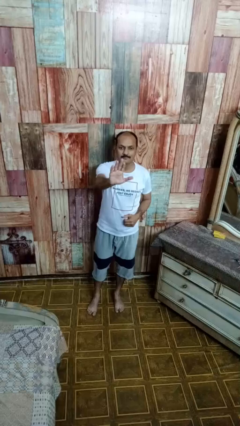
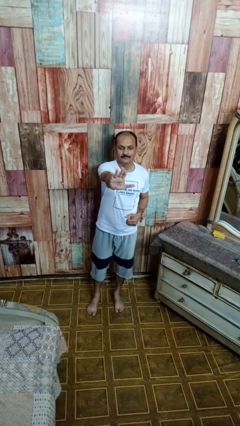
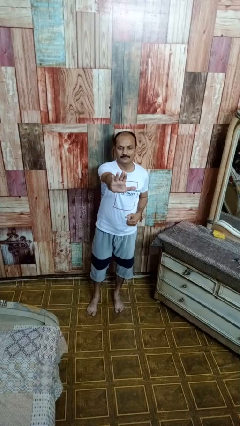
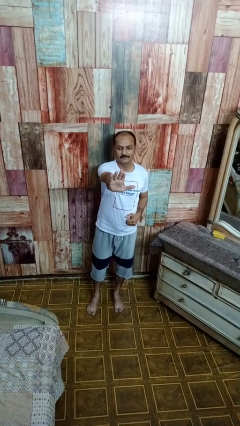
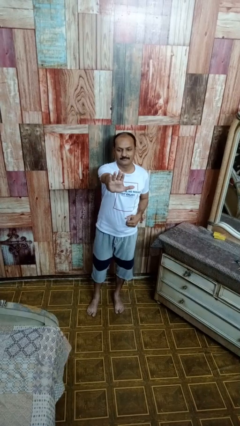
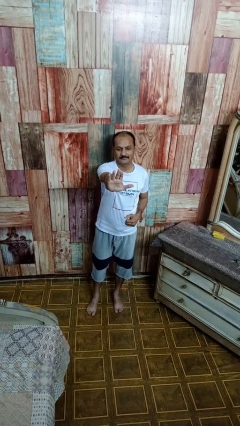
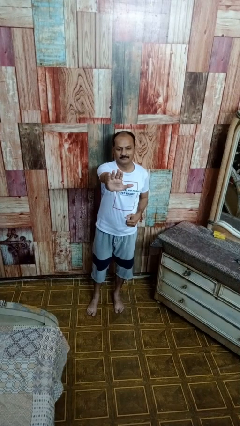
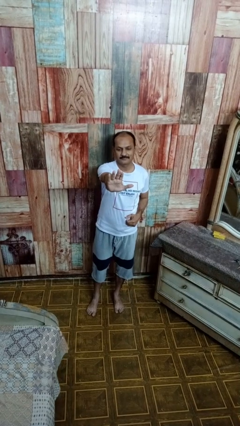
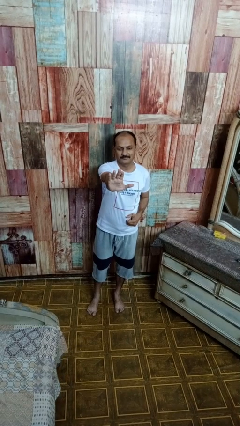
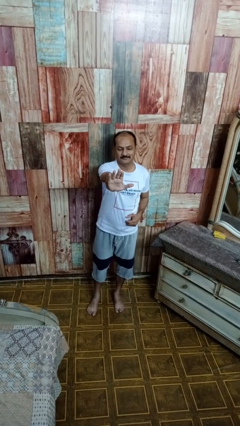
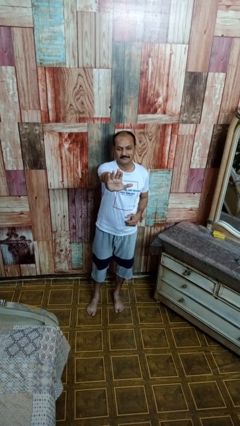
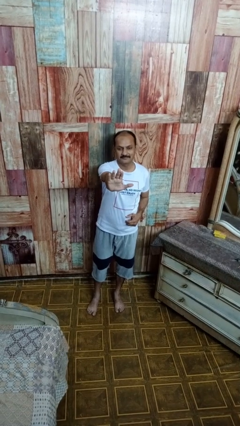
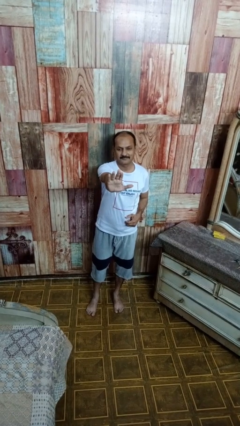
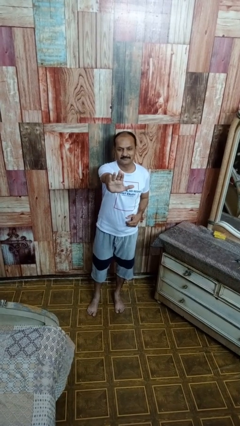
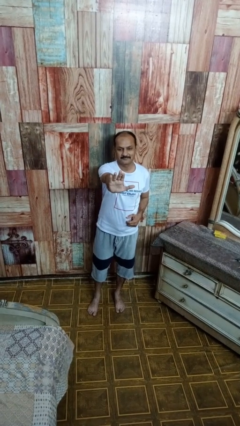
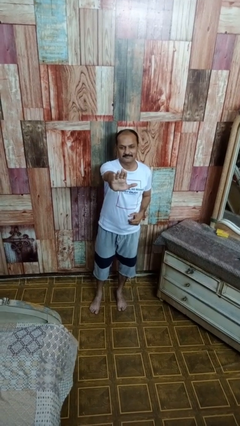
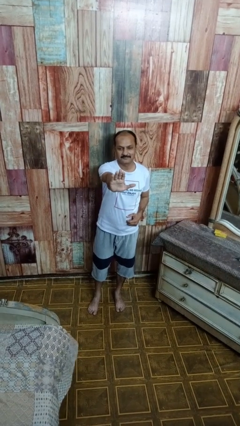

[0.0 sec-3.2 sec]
person gestures stop

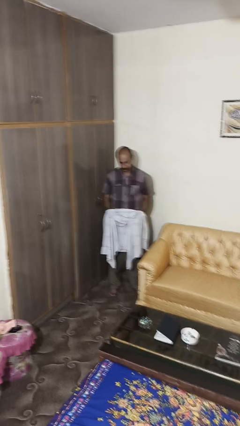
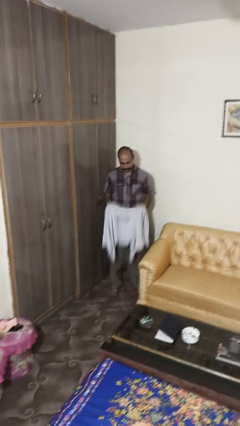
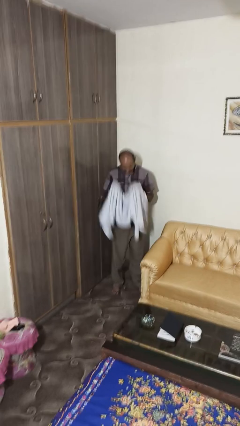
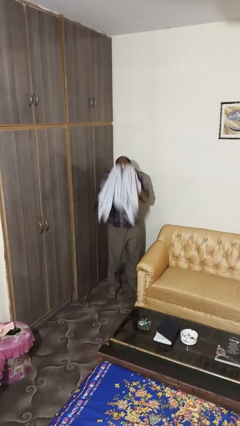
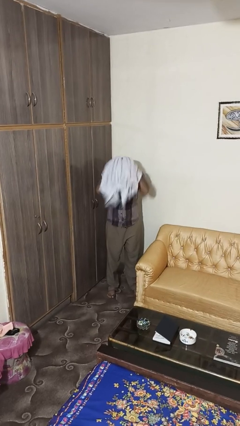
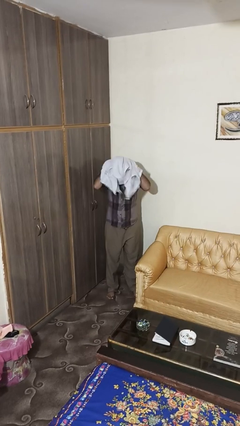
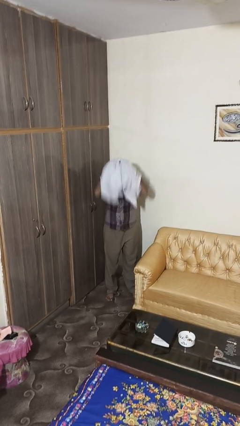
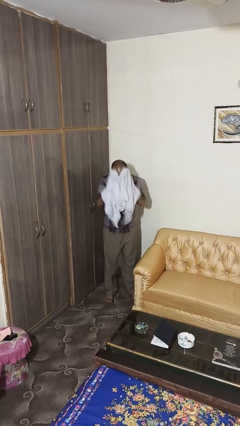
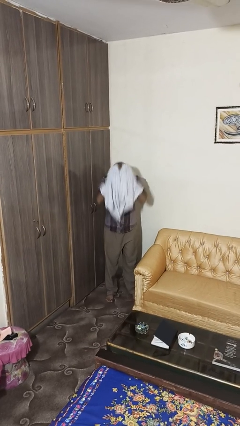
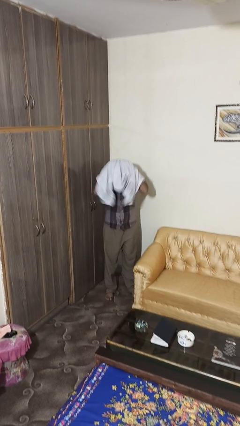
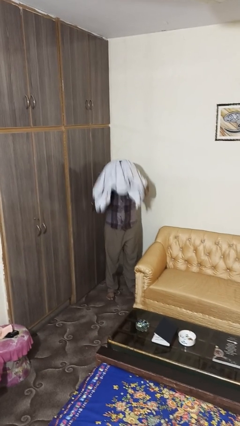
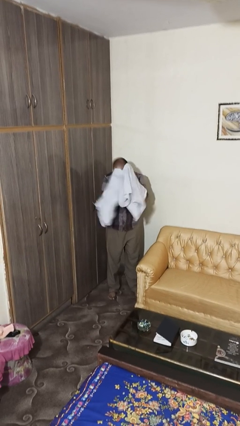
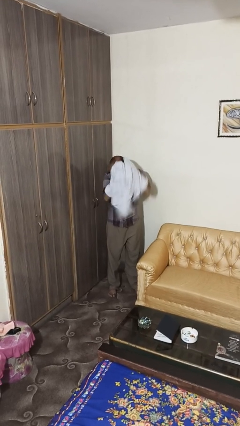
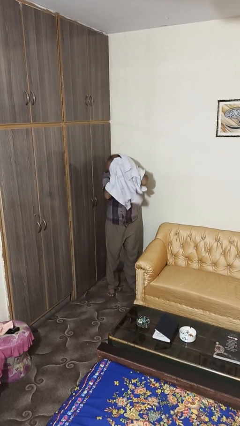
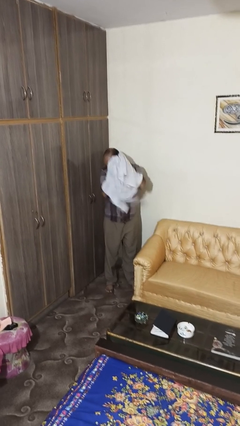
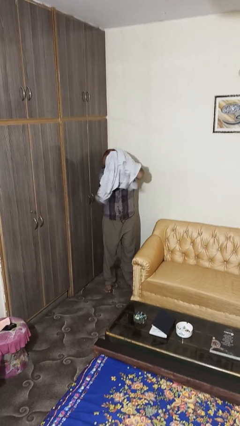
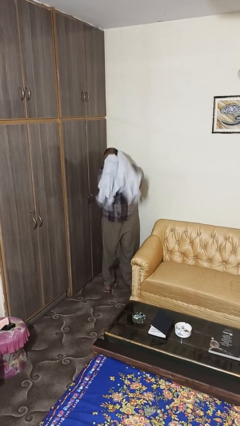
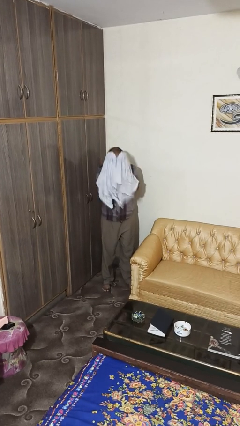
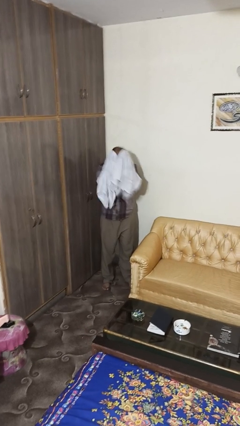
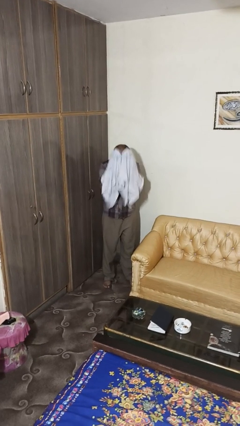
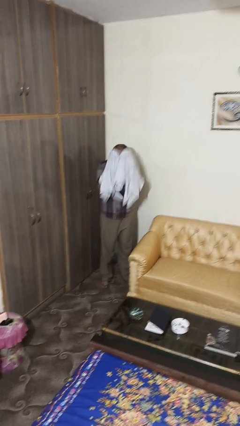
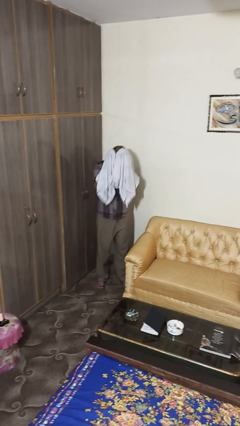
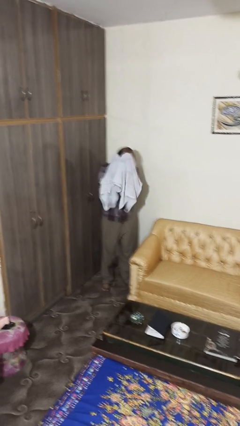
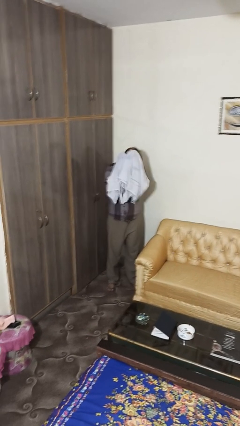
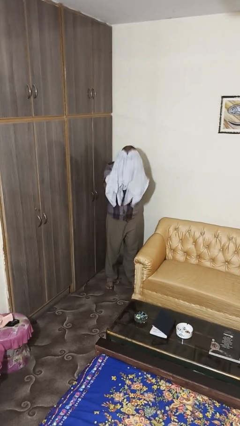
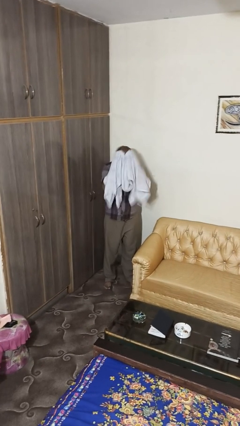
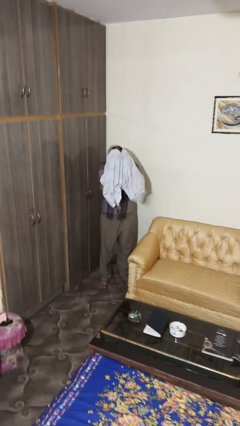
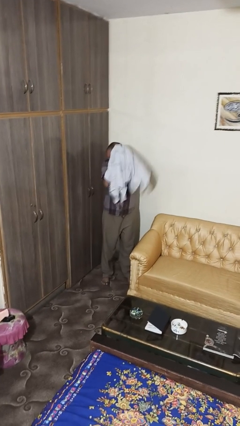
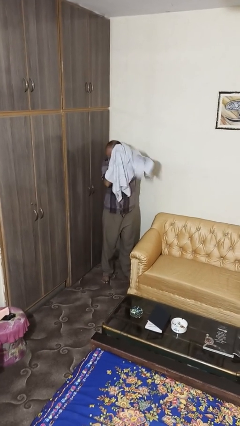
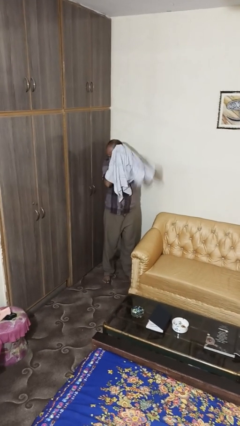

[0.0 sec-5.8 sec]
person dries hair with towel

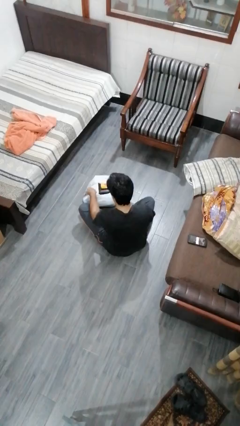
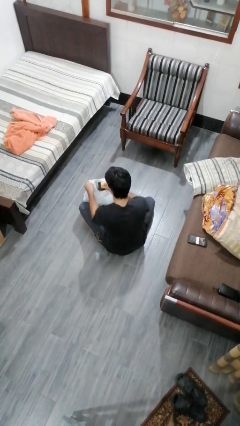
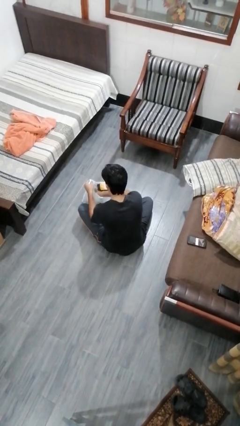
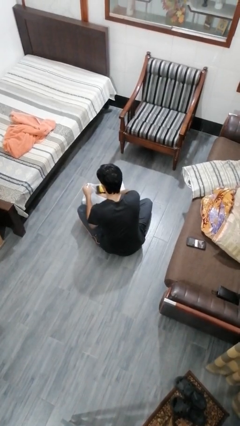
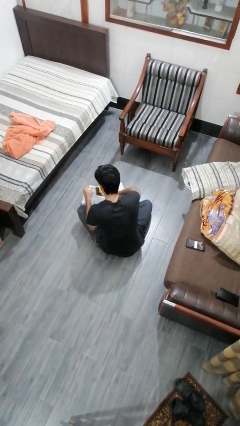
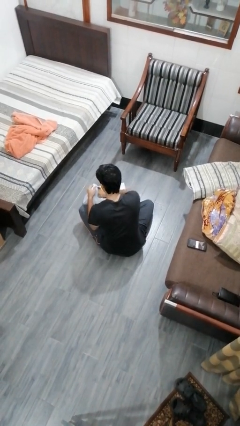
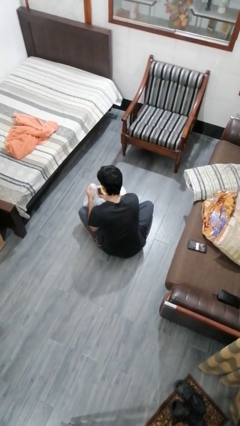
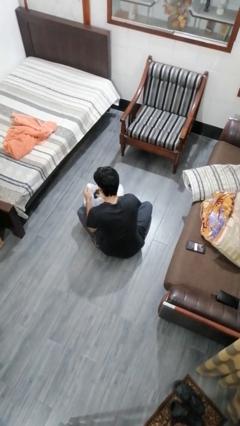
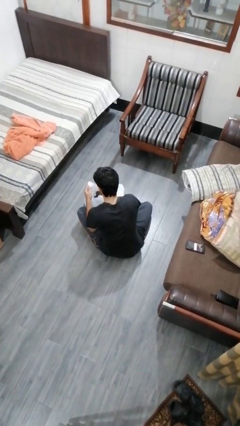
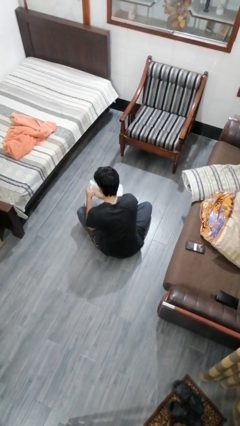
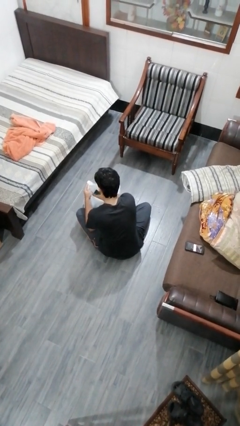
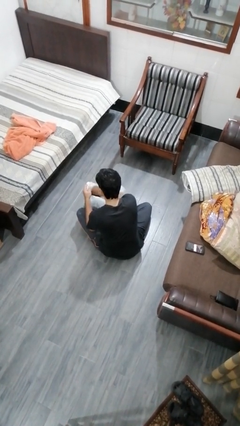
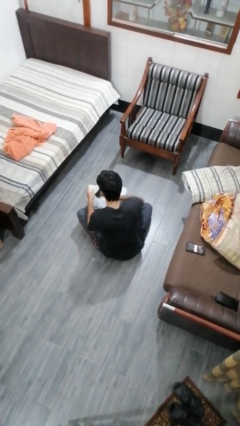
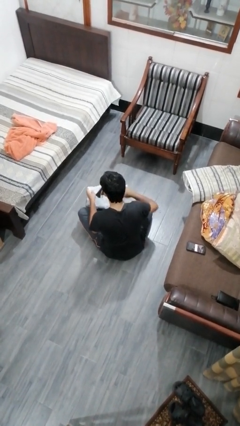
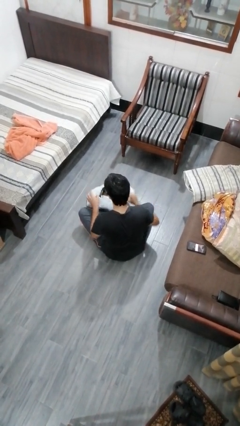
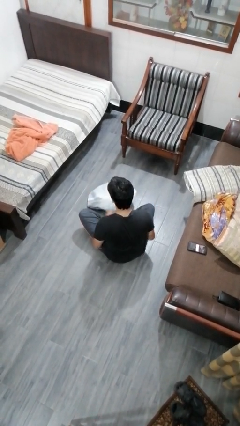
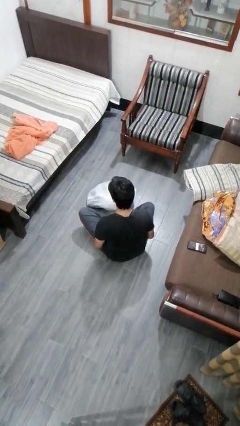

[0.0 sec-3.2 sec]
person searches in bag

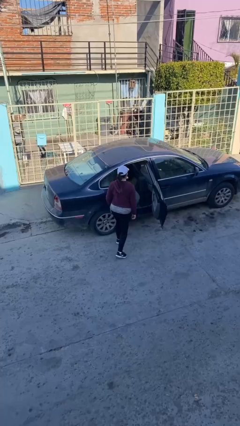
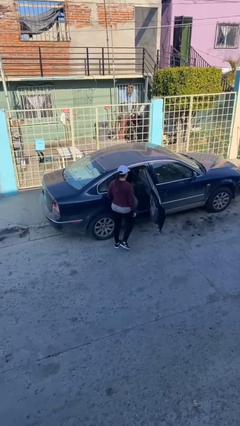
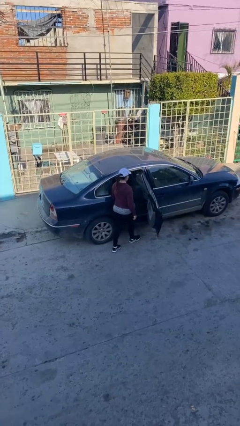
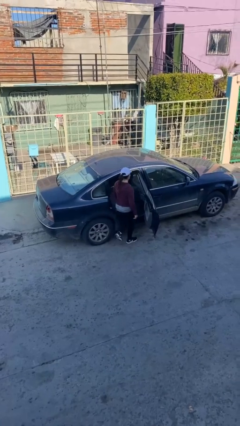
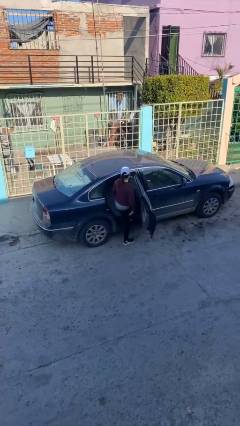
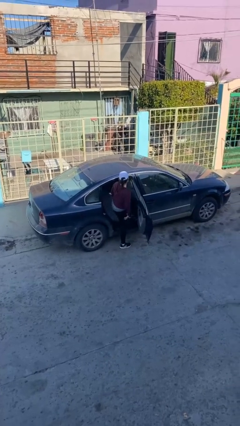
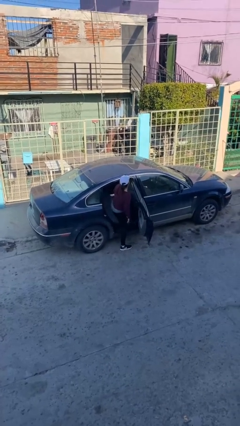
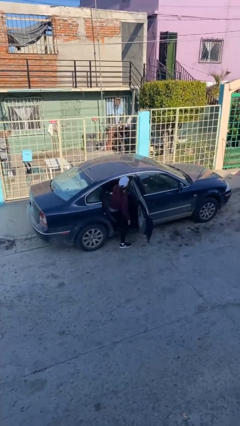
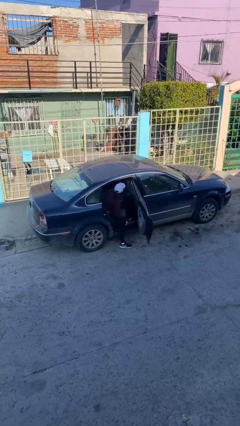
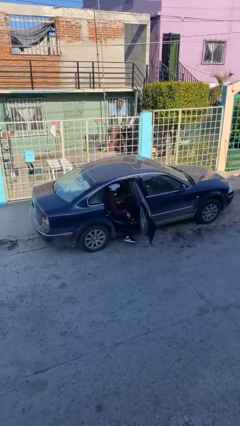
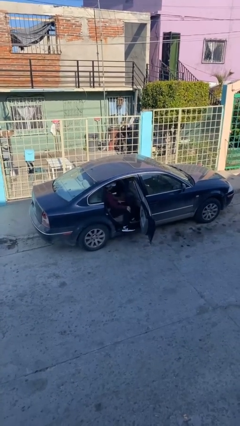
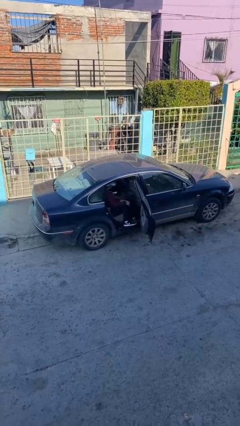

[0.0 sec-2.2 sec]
person enters car

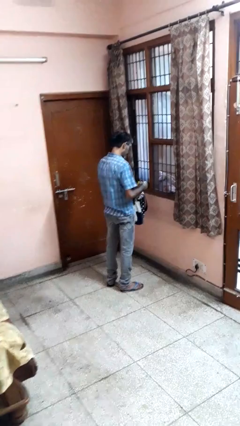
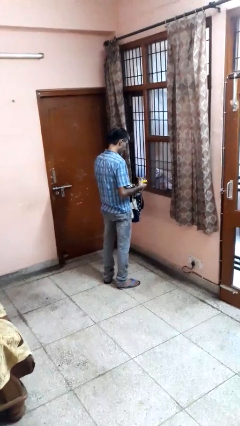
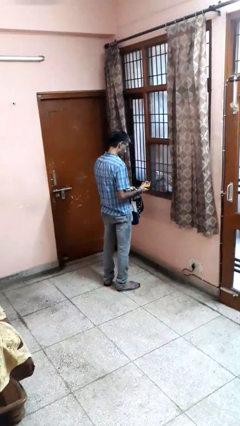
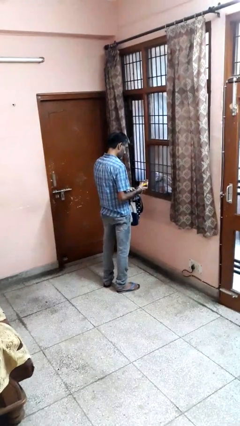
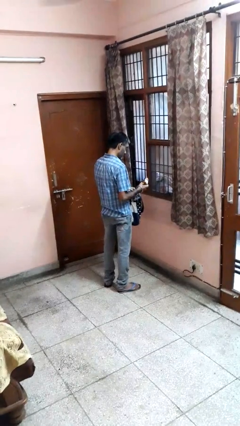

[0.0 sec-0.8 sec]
person takes object from bag

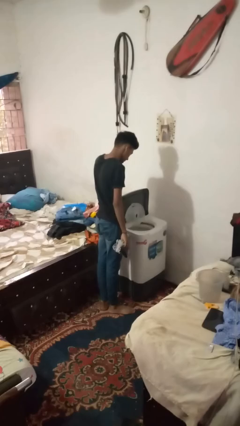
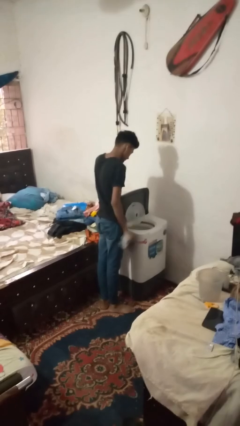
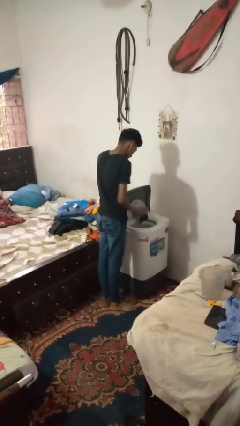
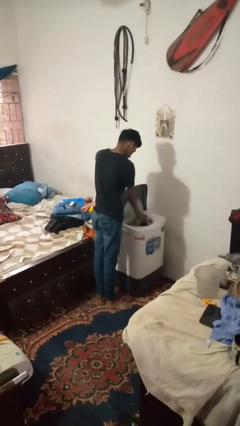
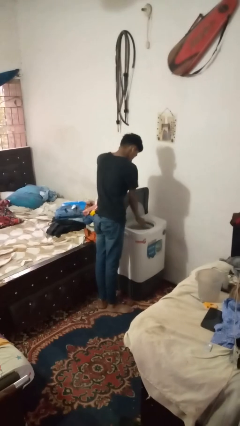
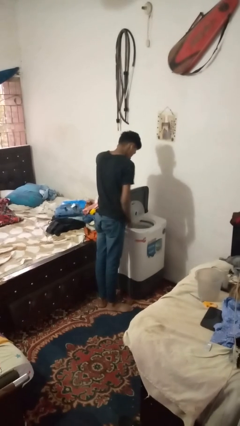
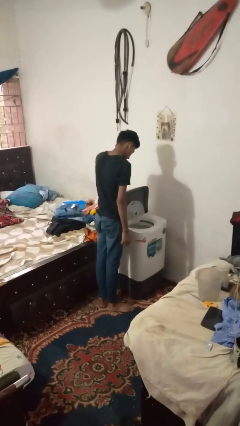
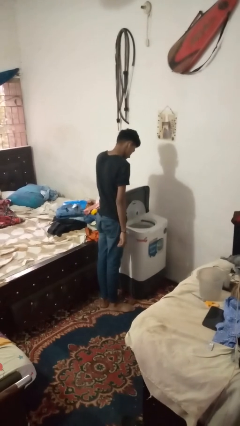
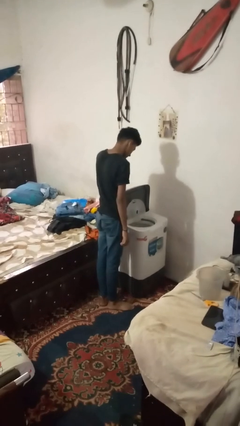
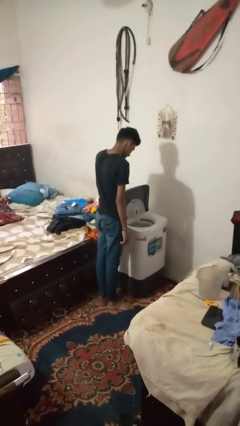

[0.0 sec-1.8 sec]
person loads dryer
